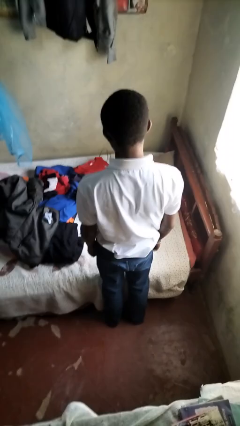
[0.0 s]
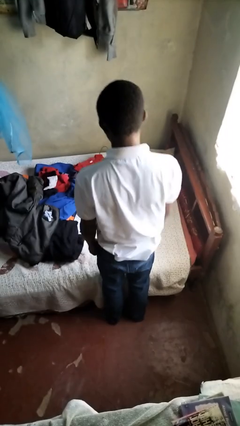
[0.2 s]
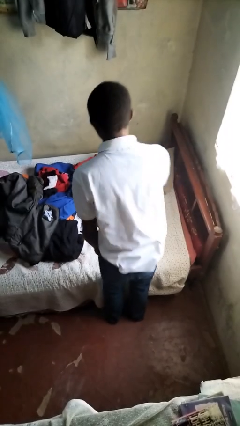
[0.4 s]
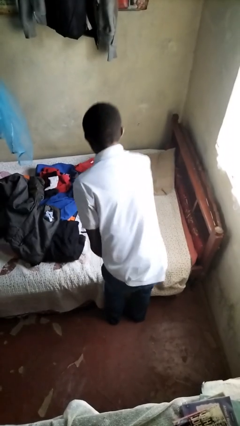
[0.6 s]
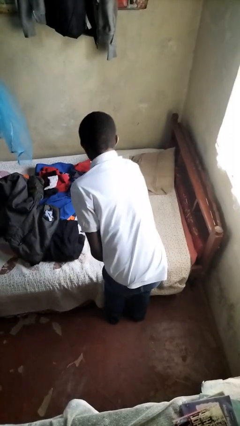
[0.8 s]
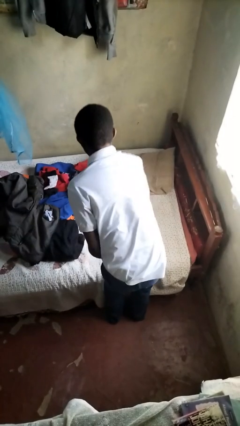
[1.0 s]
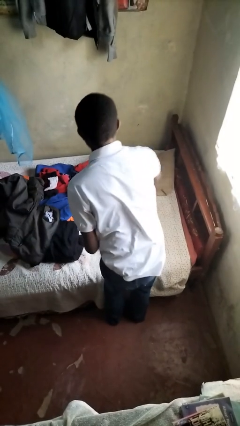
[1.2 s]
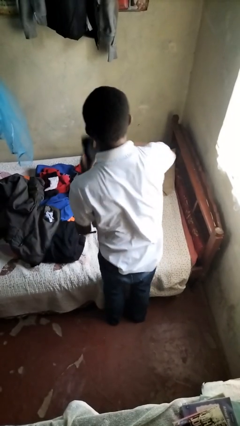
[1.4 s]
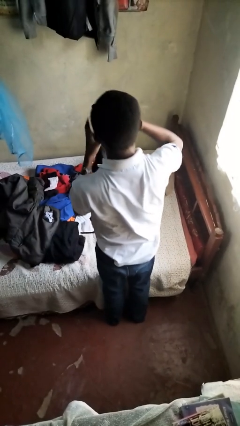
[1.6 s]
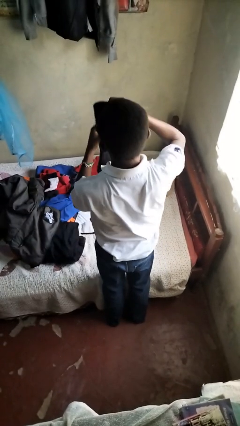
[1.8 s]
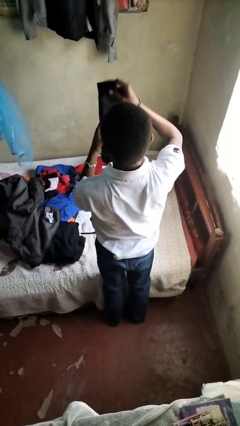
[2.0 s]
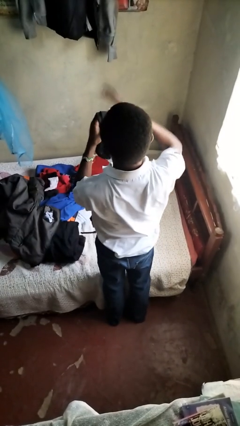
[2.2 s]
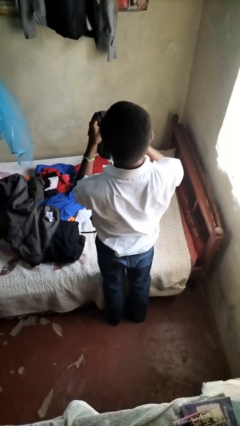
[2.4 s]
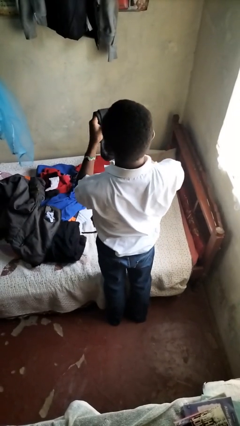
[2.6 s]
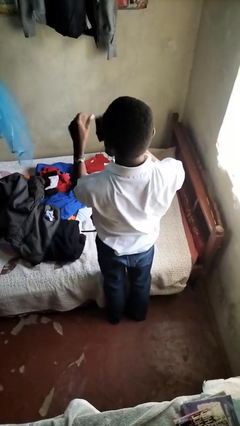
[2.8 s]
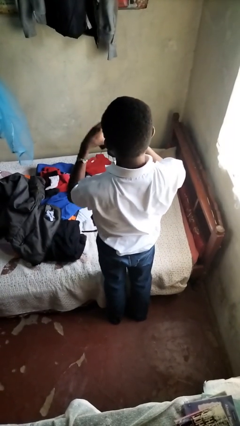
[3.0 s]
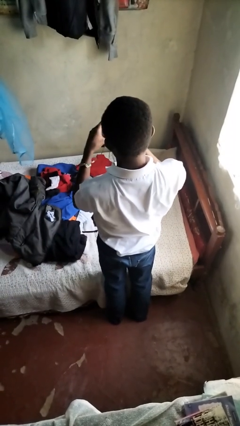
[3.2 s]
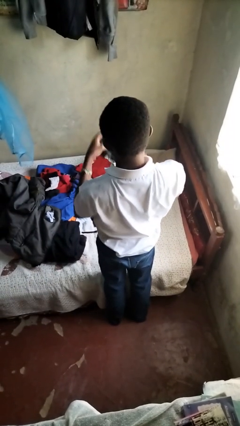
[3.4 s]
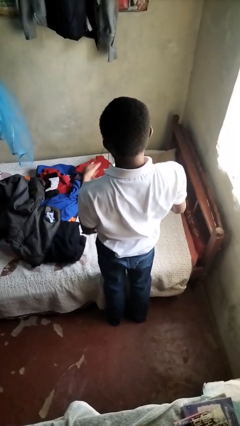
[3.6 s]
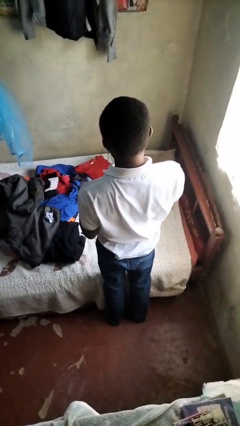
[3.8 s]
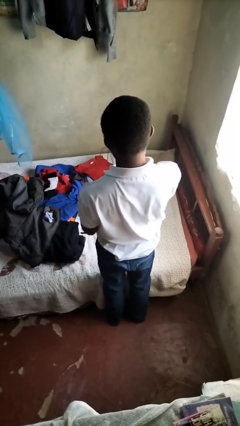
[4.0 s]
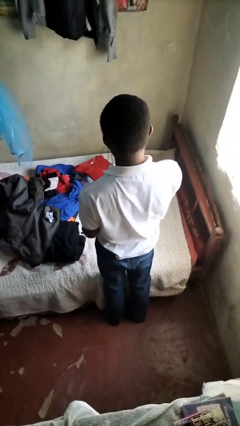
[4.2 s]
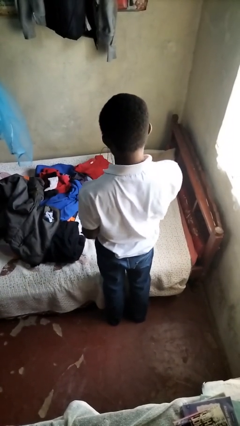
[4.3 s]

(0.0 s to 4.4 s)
person folds socks

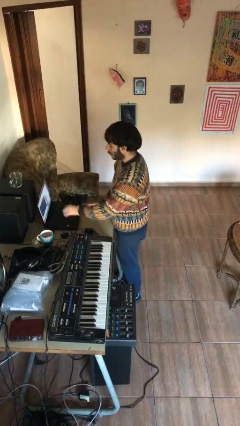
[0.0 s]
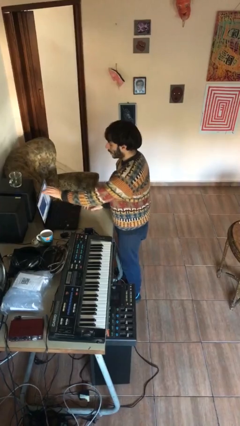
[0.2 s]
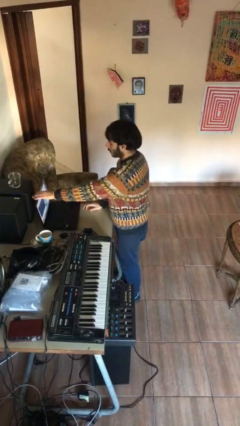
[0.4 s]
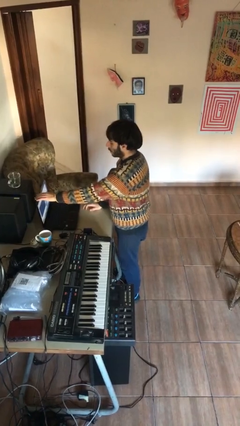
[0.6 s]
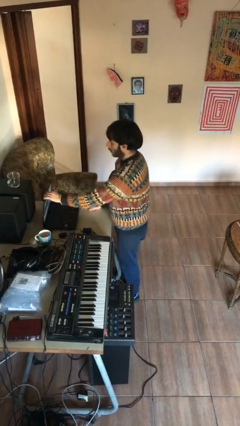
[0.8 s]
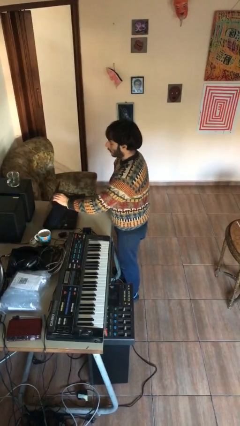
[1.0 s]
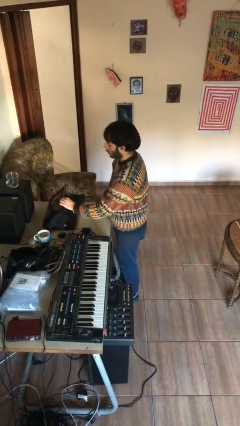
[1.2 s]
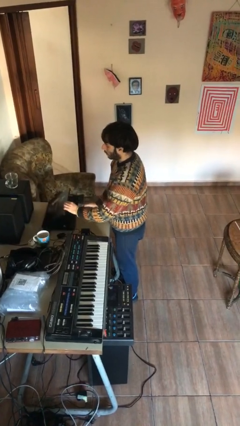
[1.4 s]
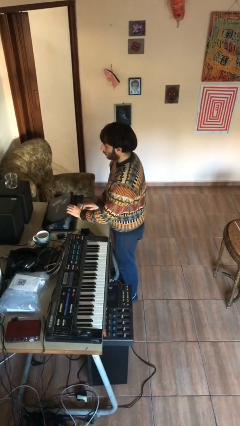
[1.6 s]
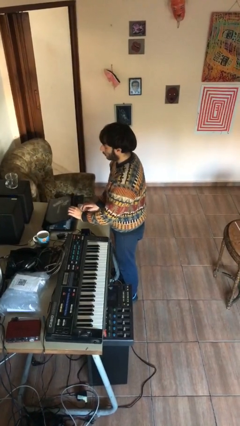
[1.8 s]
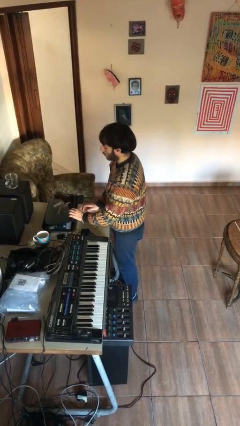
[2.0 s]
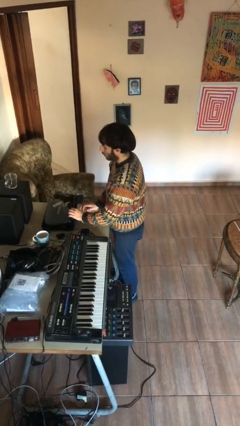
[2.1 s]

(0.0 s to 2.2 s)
person closes laptop

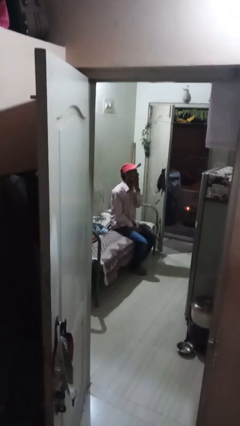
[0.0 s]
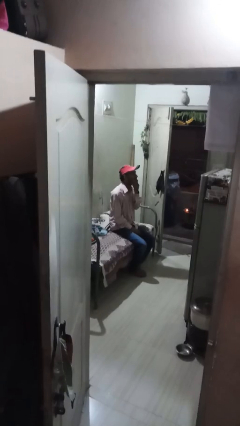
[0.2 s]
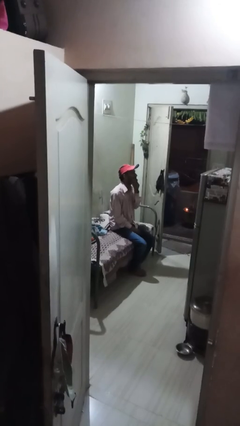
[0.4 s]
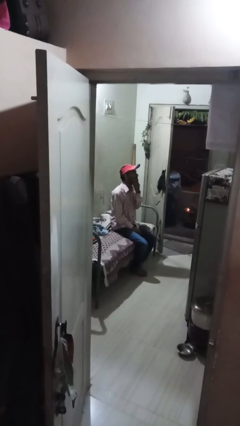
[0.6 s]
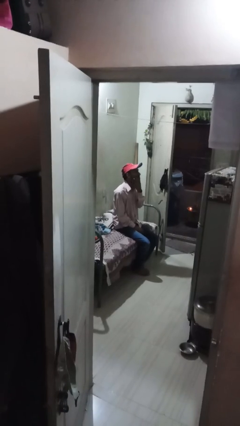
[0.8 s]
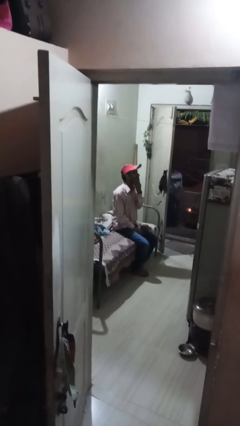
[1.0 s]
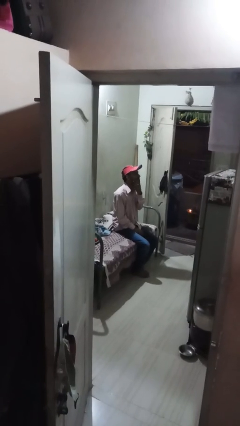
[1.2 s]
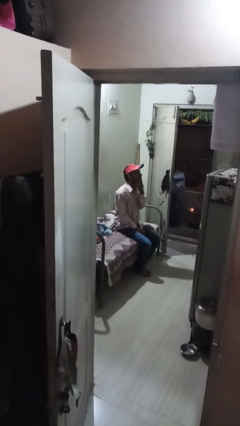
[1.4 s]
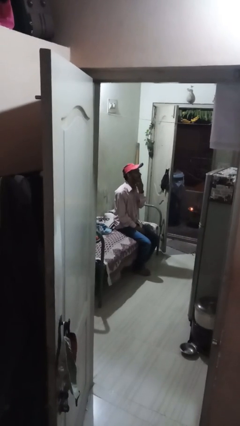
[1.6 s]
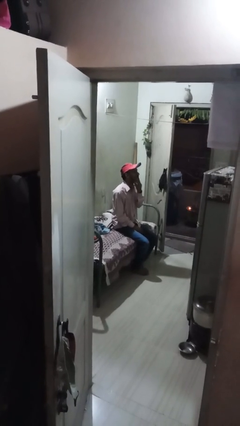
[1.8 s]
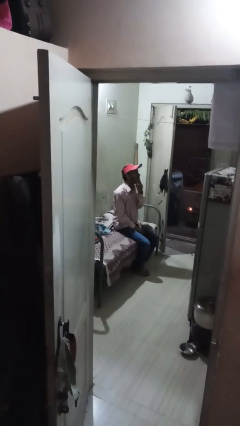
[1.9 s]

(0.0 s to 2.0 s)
person strokes chin

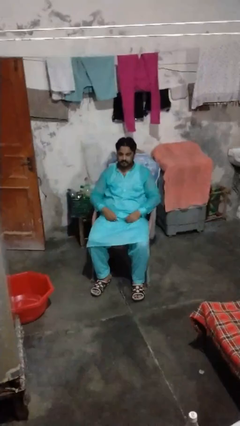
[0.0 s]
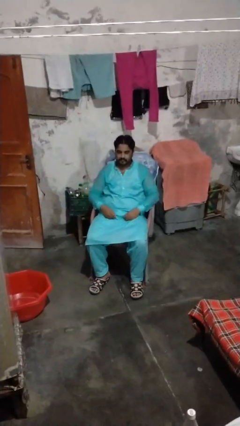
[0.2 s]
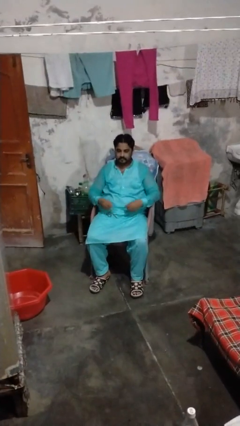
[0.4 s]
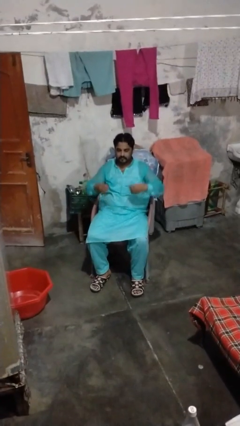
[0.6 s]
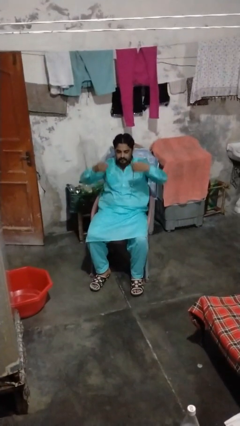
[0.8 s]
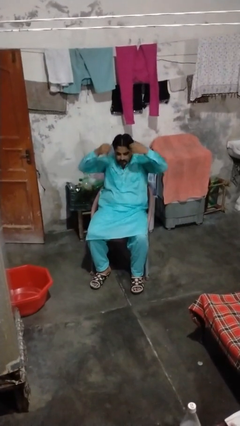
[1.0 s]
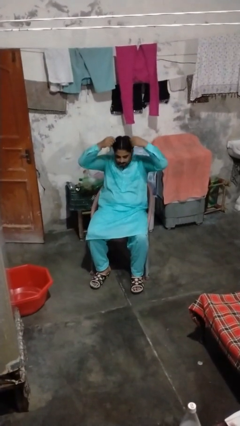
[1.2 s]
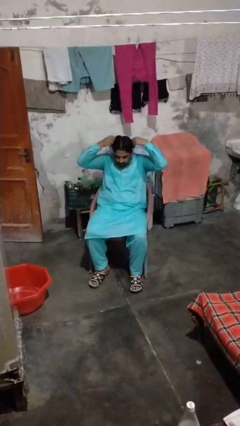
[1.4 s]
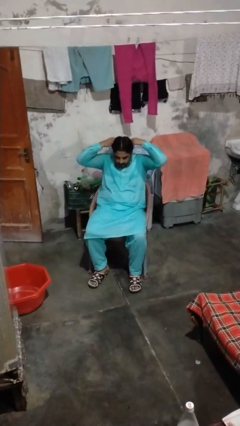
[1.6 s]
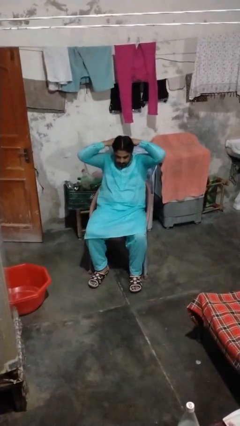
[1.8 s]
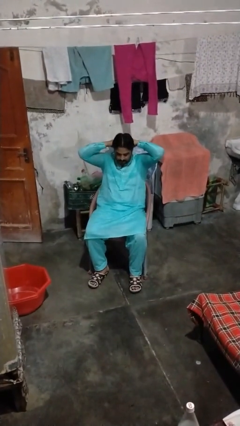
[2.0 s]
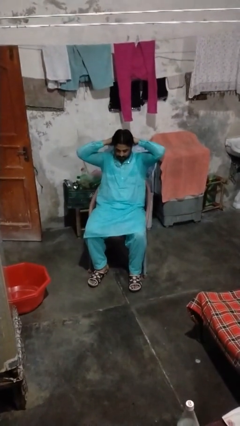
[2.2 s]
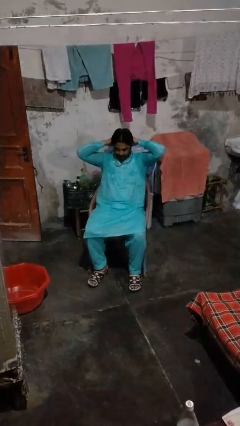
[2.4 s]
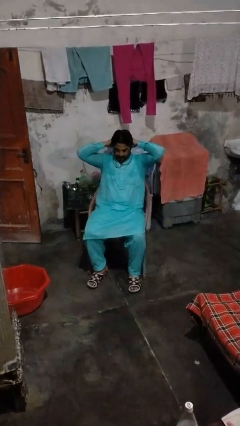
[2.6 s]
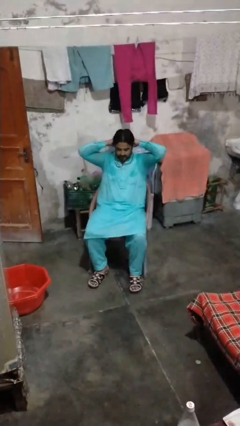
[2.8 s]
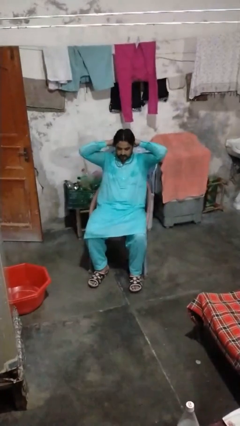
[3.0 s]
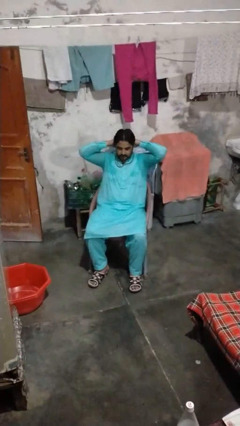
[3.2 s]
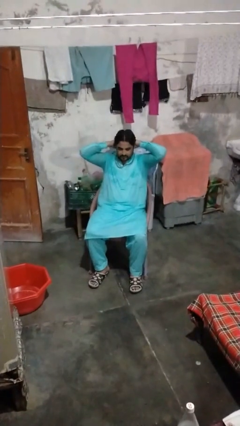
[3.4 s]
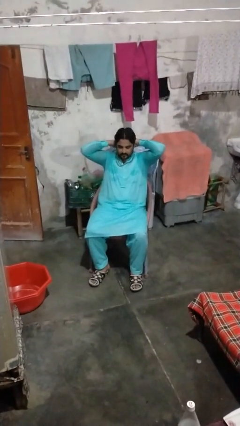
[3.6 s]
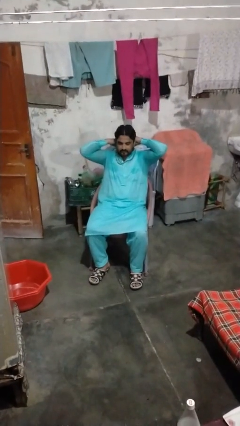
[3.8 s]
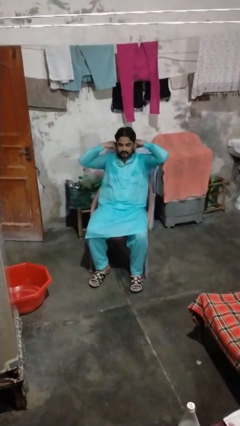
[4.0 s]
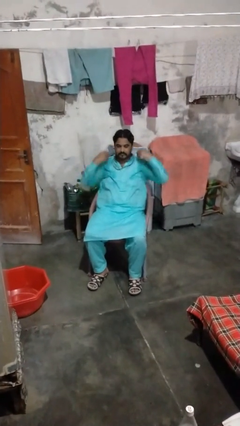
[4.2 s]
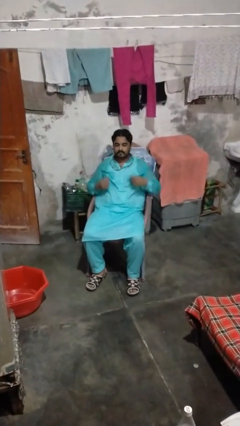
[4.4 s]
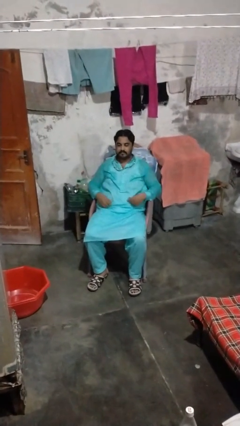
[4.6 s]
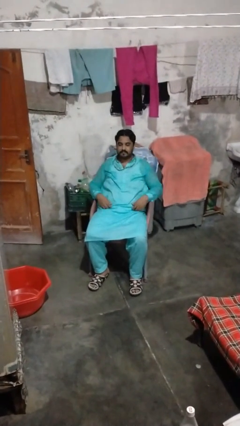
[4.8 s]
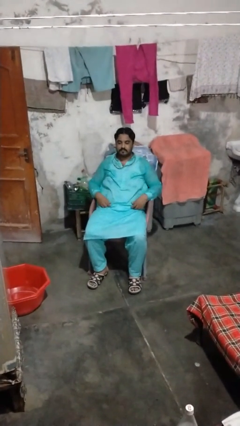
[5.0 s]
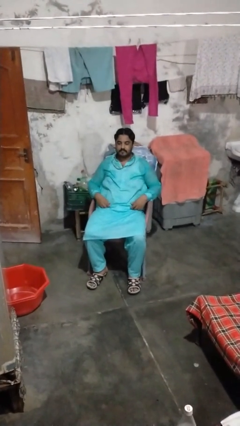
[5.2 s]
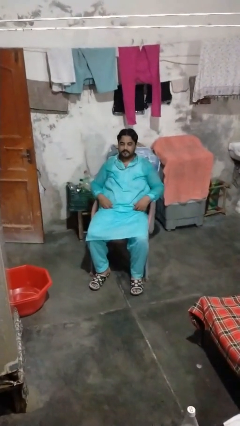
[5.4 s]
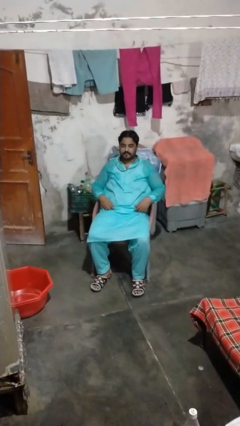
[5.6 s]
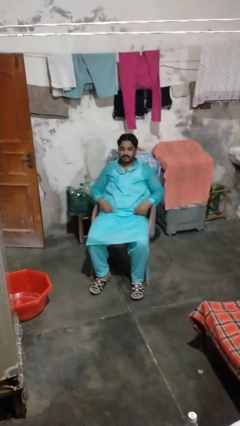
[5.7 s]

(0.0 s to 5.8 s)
person puts on necklace

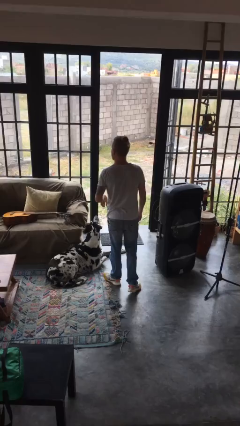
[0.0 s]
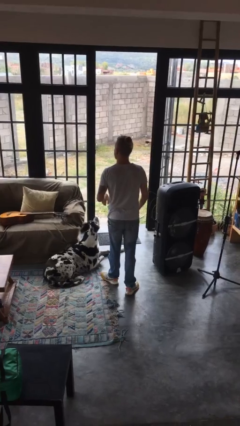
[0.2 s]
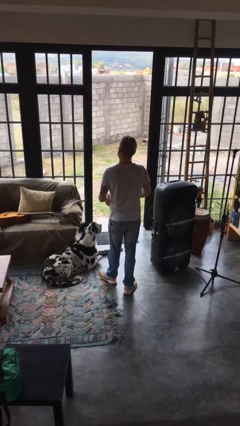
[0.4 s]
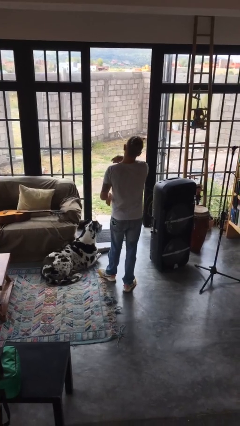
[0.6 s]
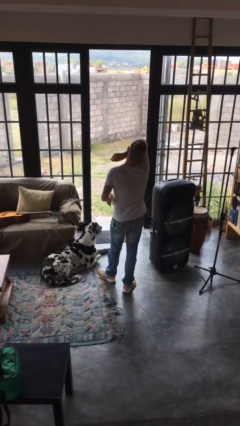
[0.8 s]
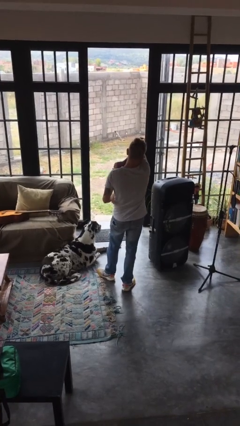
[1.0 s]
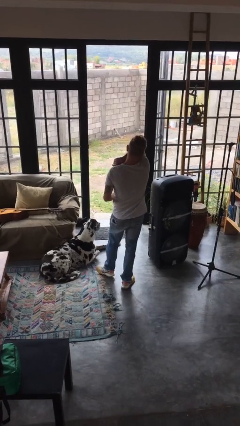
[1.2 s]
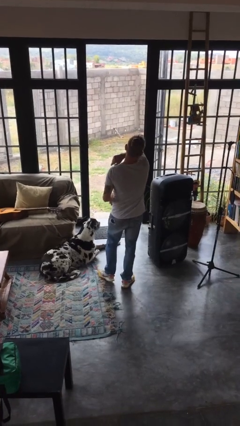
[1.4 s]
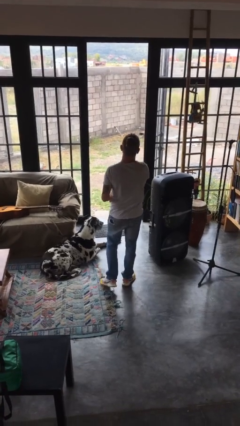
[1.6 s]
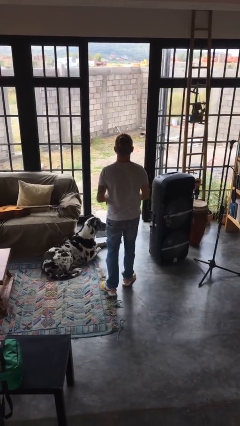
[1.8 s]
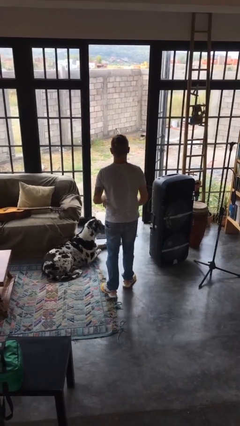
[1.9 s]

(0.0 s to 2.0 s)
person sneezes into arm

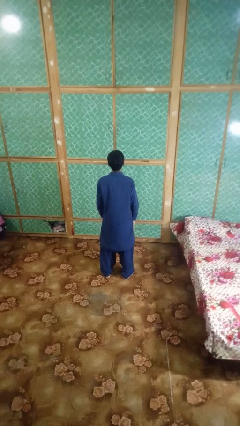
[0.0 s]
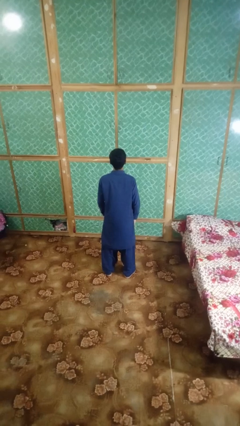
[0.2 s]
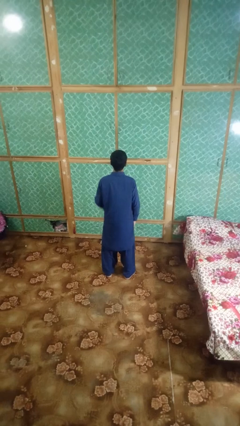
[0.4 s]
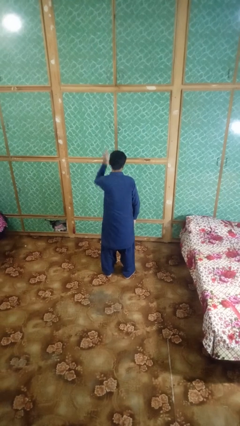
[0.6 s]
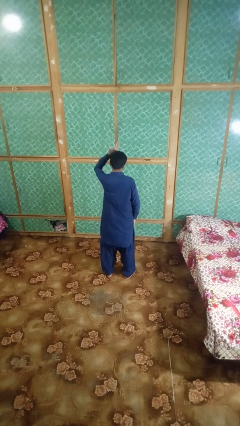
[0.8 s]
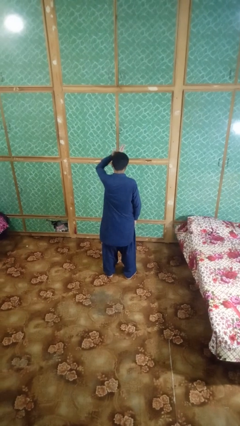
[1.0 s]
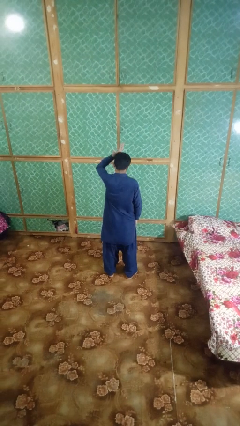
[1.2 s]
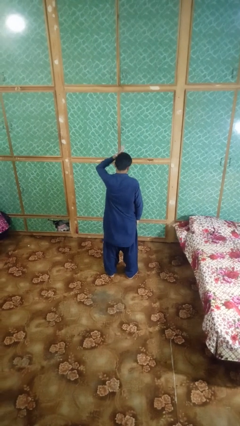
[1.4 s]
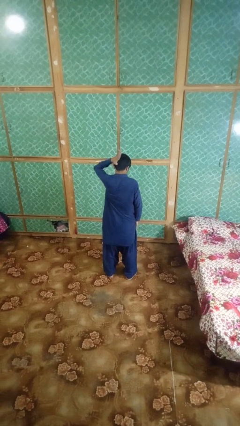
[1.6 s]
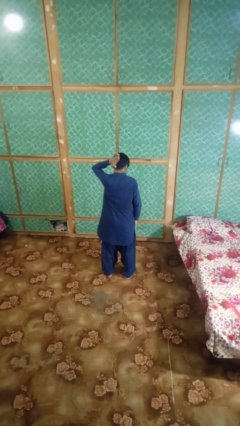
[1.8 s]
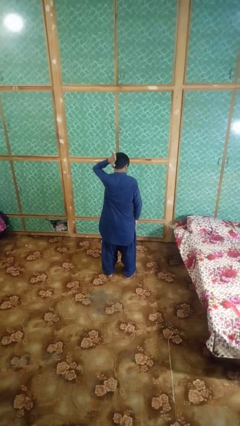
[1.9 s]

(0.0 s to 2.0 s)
person pats head
